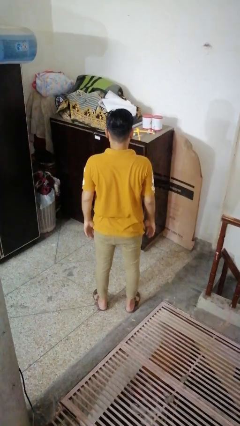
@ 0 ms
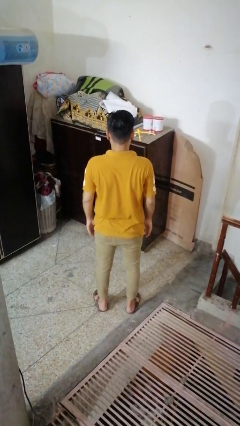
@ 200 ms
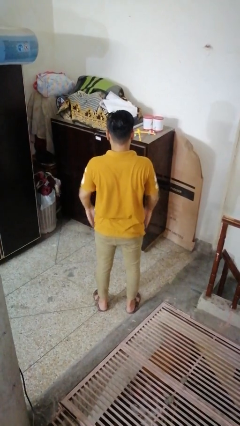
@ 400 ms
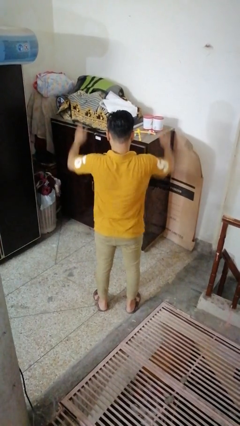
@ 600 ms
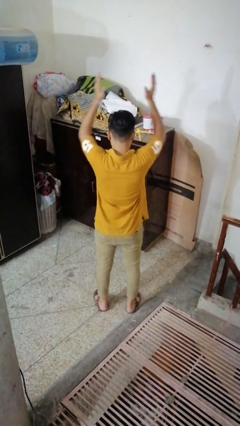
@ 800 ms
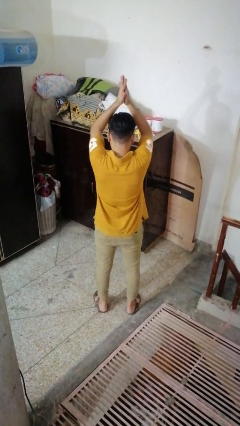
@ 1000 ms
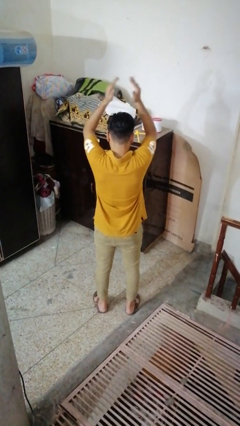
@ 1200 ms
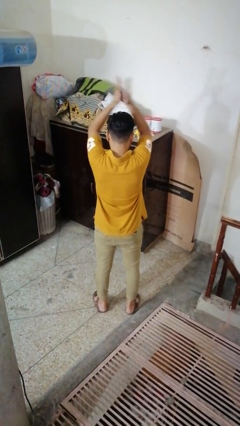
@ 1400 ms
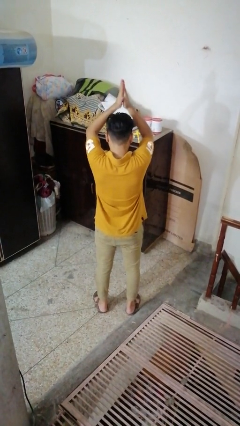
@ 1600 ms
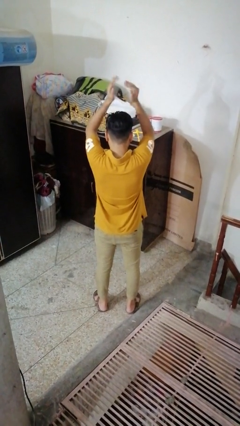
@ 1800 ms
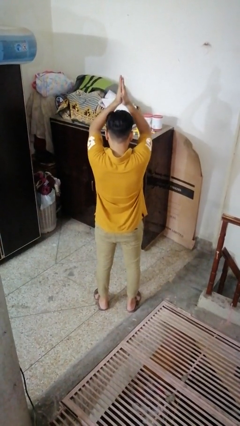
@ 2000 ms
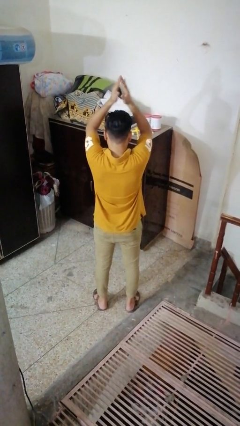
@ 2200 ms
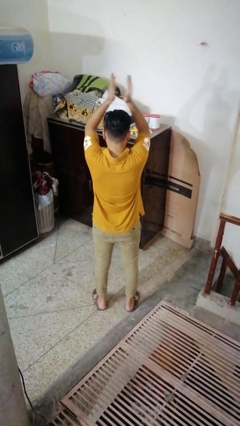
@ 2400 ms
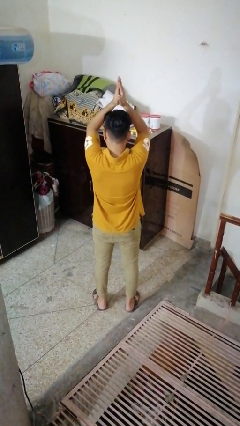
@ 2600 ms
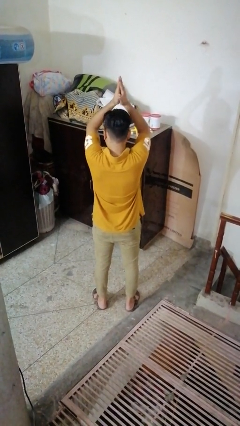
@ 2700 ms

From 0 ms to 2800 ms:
person claps hands

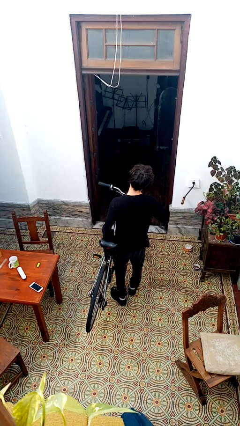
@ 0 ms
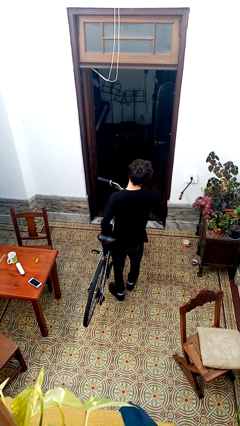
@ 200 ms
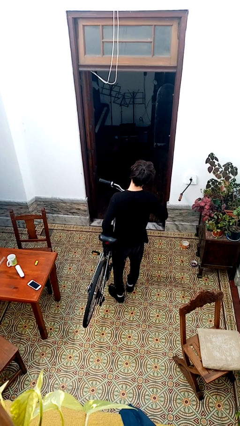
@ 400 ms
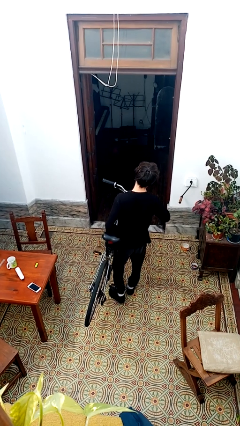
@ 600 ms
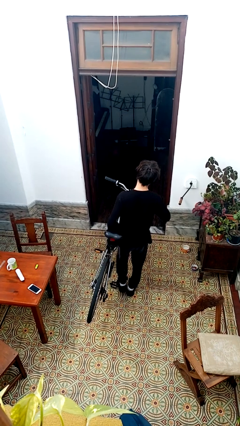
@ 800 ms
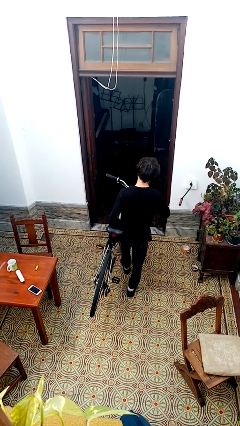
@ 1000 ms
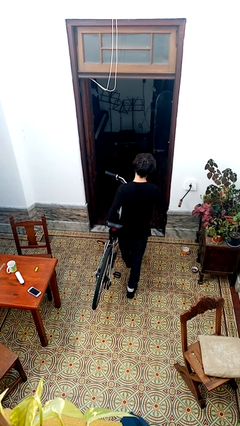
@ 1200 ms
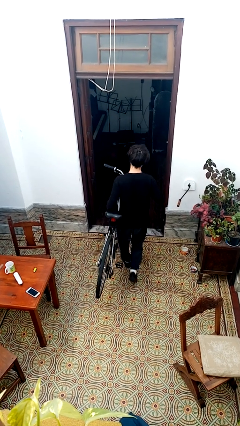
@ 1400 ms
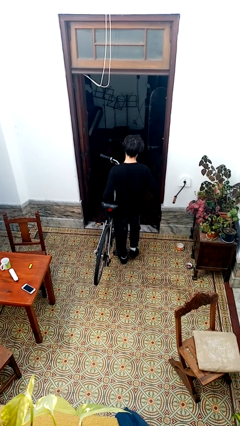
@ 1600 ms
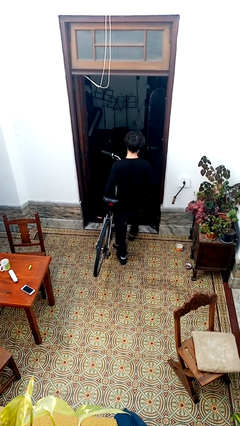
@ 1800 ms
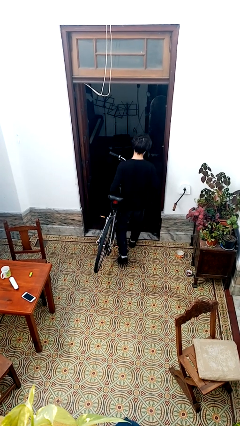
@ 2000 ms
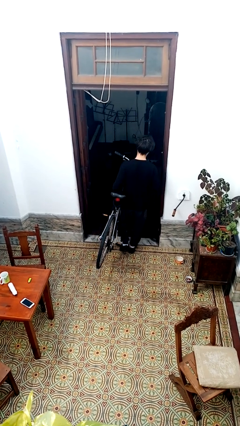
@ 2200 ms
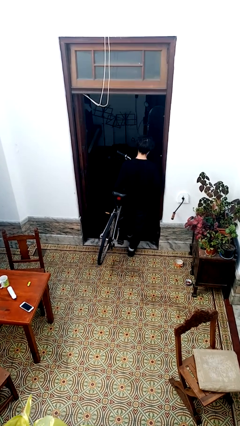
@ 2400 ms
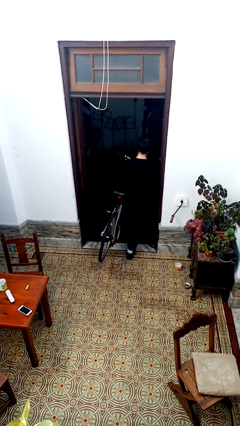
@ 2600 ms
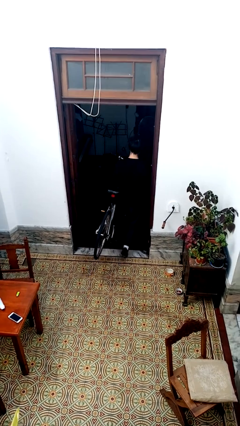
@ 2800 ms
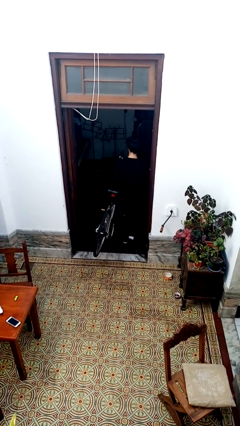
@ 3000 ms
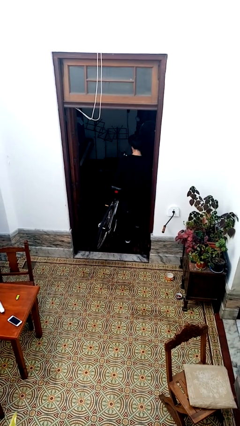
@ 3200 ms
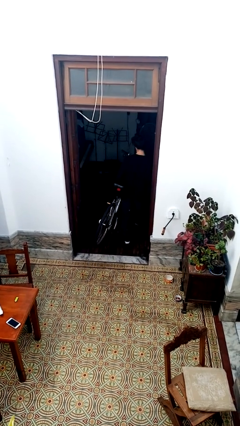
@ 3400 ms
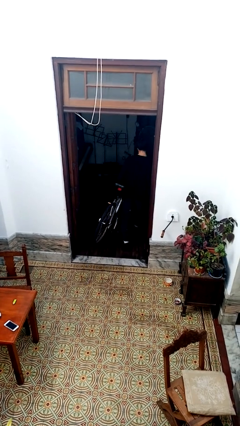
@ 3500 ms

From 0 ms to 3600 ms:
person carries bicycle

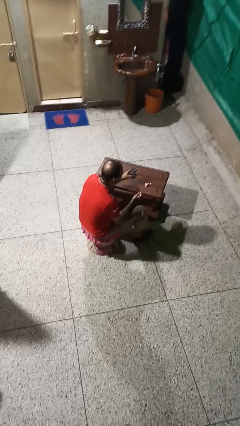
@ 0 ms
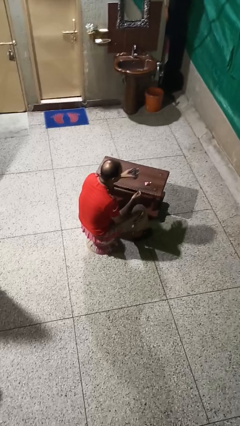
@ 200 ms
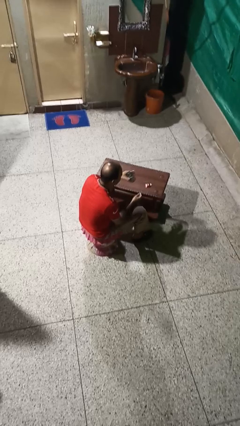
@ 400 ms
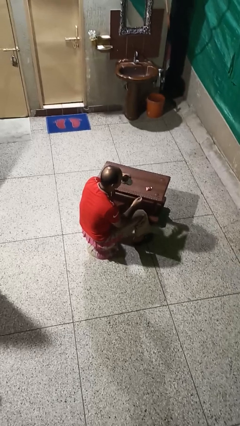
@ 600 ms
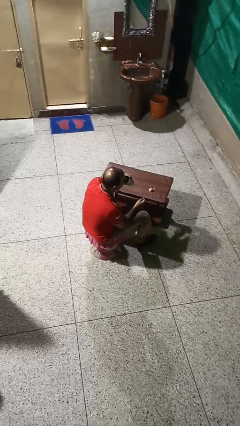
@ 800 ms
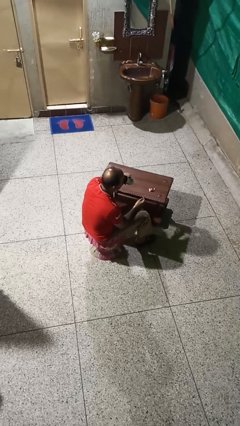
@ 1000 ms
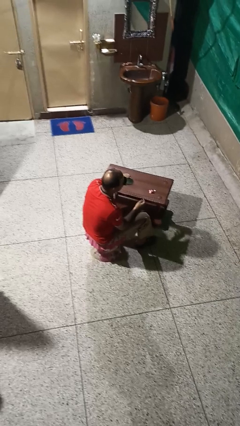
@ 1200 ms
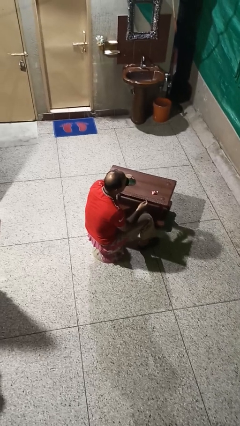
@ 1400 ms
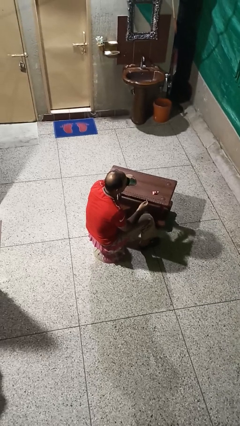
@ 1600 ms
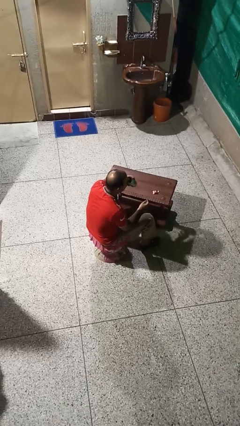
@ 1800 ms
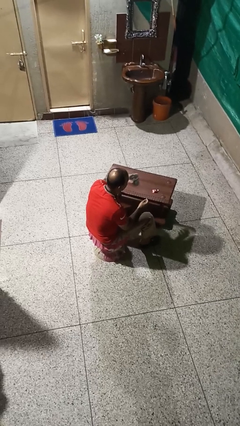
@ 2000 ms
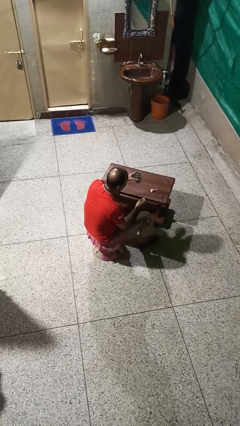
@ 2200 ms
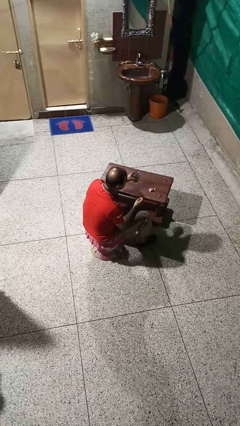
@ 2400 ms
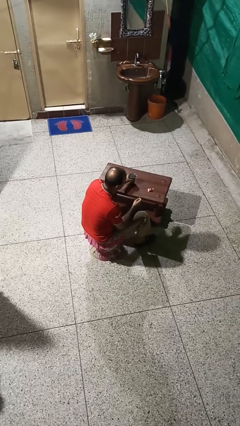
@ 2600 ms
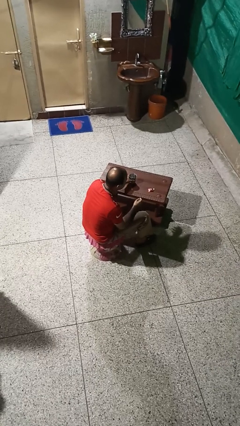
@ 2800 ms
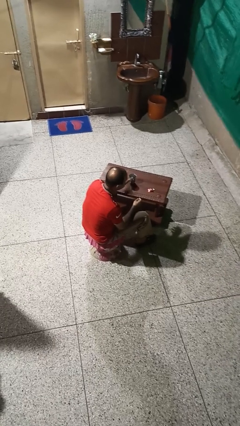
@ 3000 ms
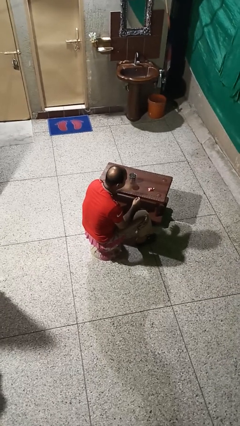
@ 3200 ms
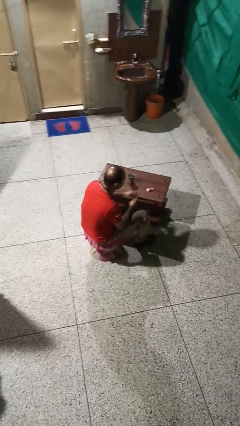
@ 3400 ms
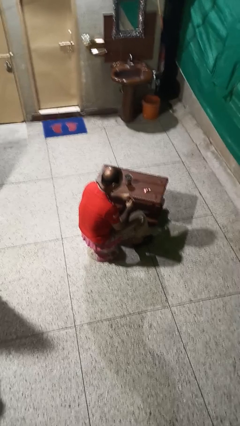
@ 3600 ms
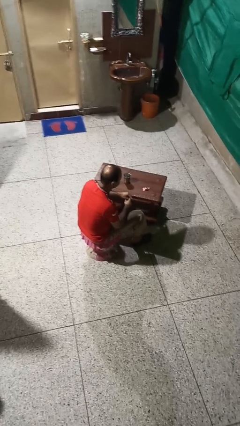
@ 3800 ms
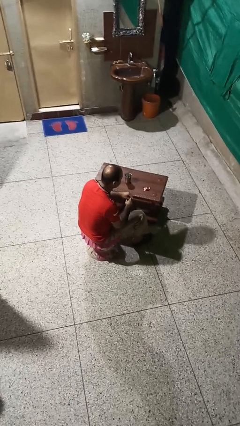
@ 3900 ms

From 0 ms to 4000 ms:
person drinks from cup

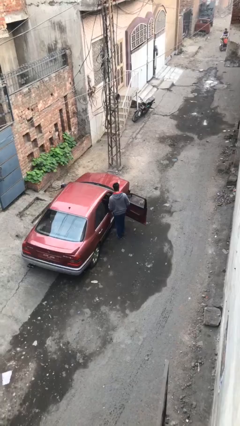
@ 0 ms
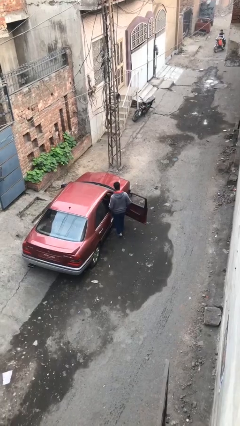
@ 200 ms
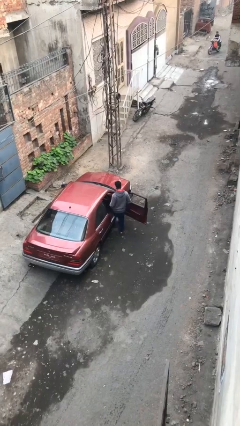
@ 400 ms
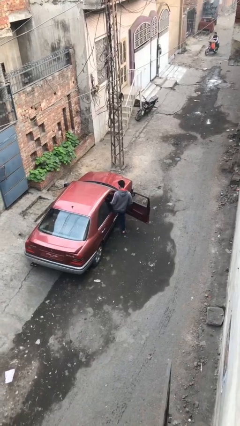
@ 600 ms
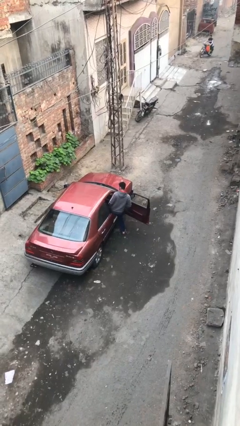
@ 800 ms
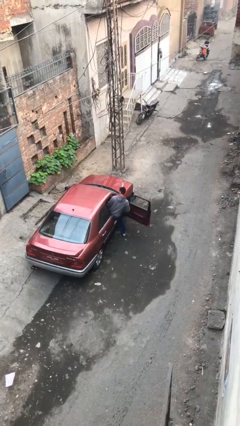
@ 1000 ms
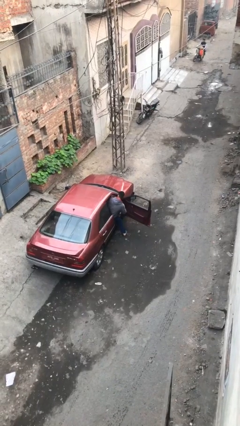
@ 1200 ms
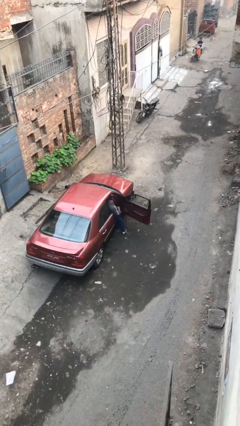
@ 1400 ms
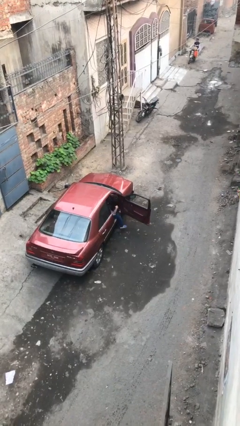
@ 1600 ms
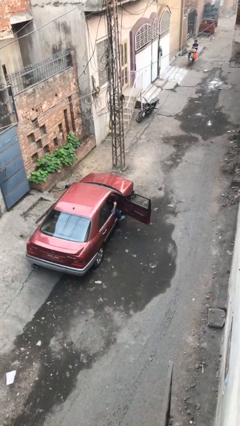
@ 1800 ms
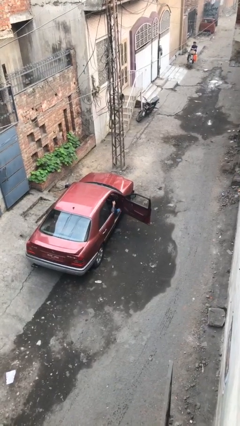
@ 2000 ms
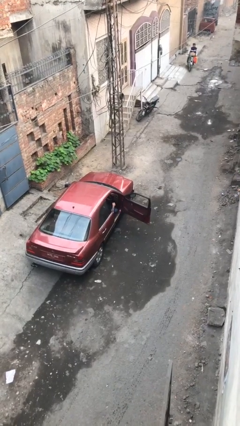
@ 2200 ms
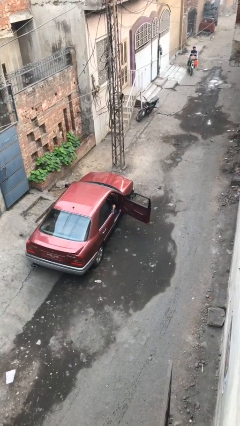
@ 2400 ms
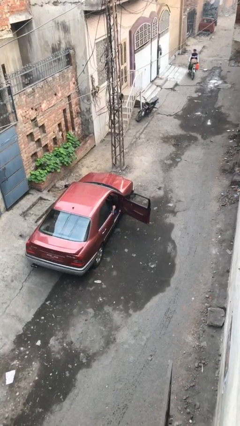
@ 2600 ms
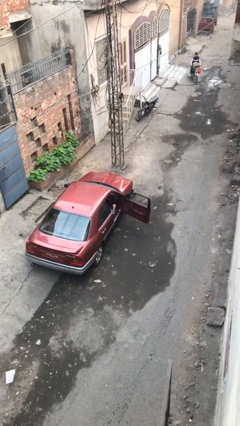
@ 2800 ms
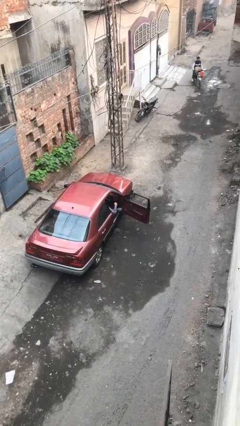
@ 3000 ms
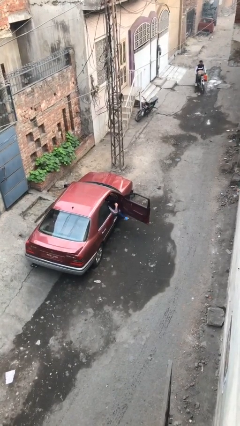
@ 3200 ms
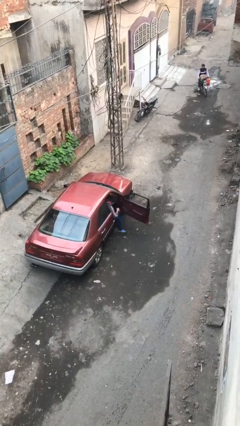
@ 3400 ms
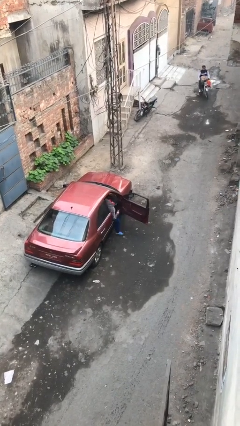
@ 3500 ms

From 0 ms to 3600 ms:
person enters car

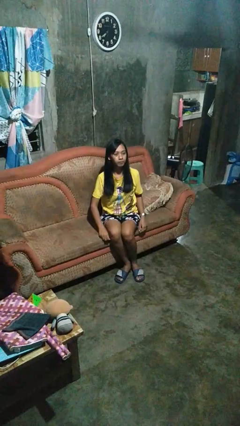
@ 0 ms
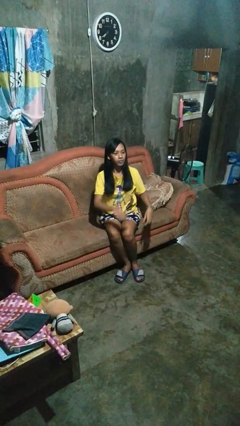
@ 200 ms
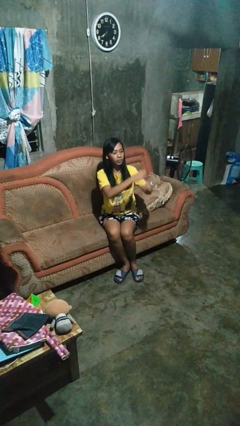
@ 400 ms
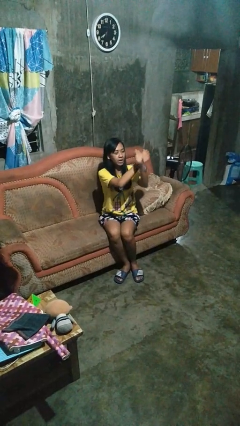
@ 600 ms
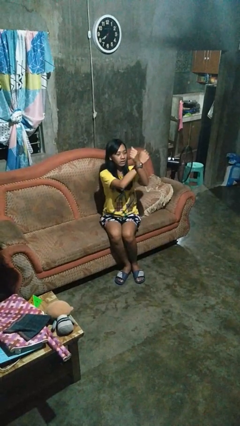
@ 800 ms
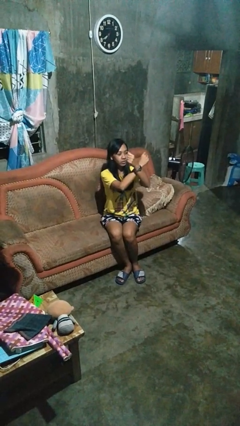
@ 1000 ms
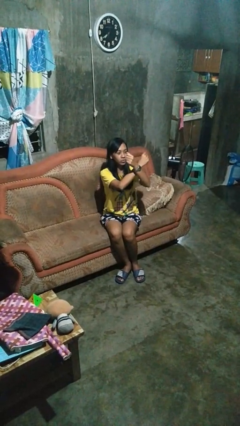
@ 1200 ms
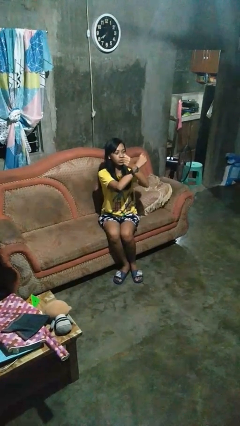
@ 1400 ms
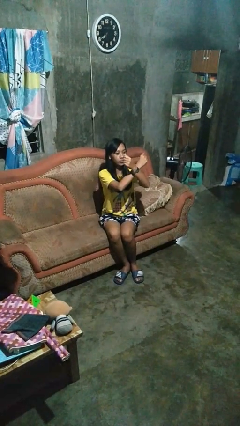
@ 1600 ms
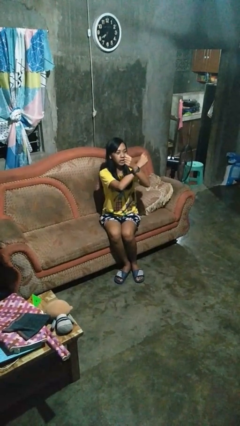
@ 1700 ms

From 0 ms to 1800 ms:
person gestures arms x

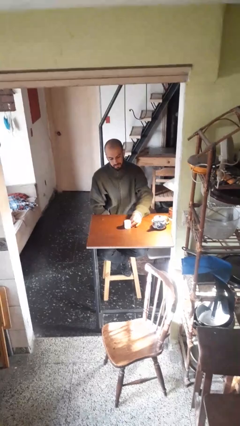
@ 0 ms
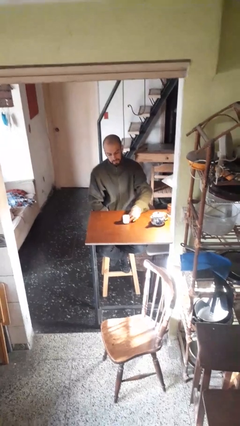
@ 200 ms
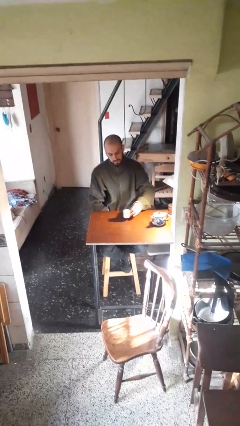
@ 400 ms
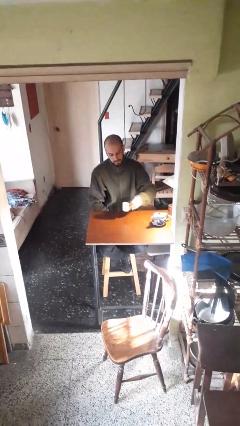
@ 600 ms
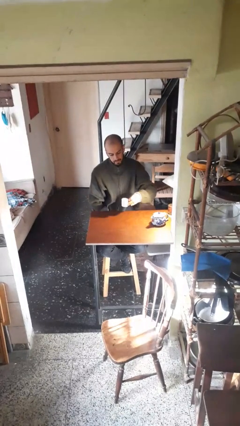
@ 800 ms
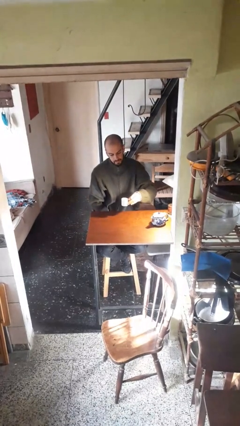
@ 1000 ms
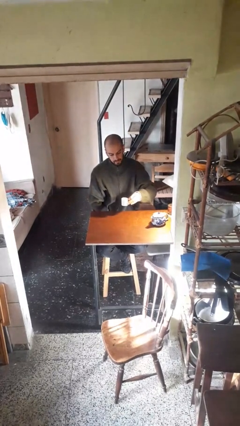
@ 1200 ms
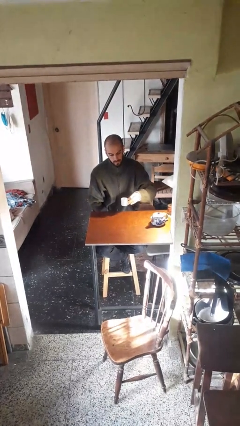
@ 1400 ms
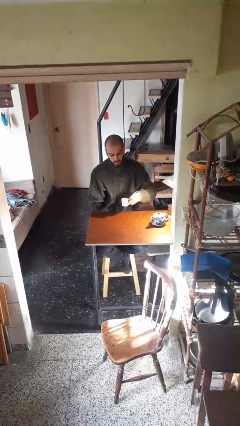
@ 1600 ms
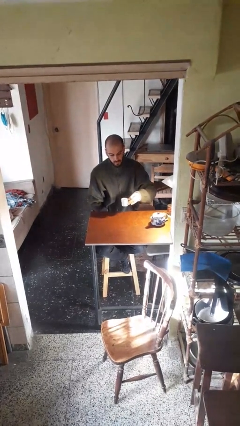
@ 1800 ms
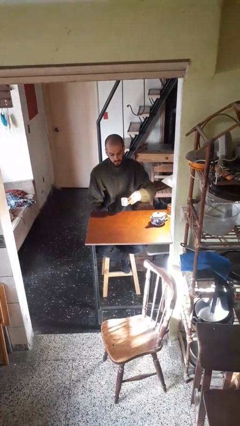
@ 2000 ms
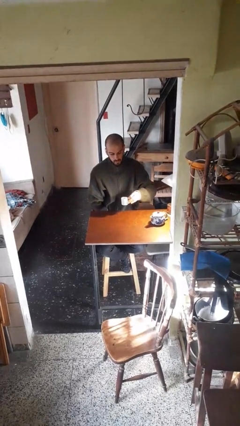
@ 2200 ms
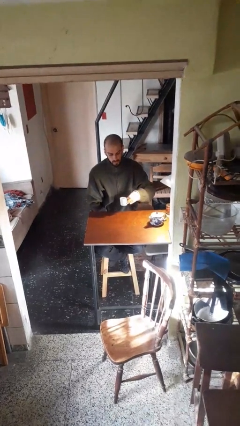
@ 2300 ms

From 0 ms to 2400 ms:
person picks up object from table
